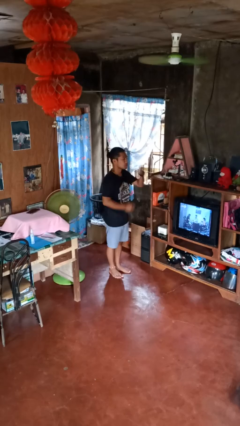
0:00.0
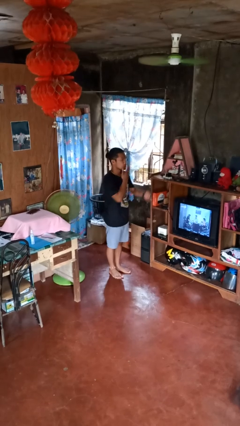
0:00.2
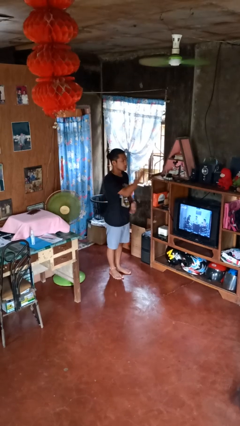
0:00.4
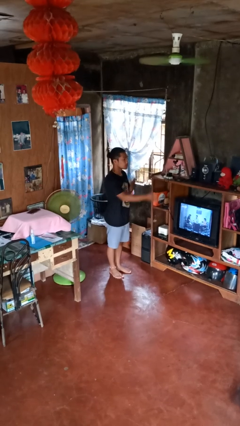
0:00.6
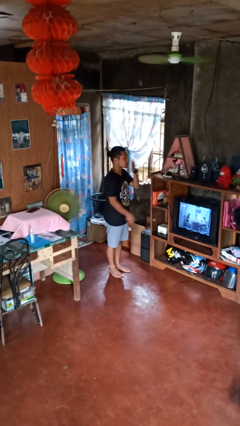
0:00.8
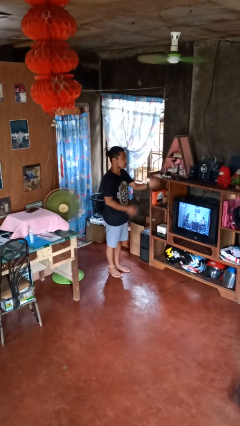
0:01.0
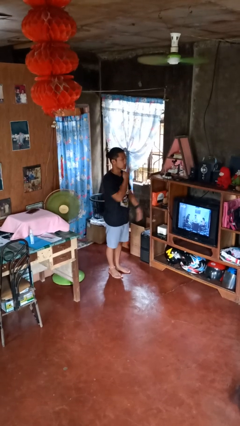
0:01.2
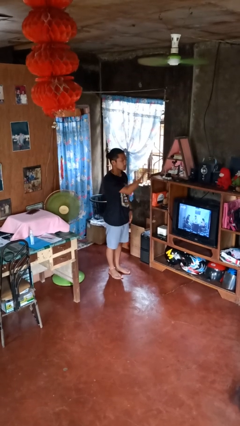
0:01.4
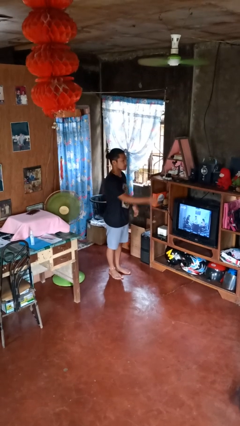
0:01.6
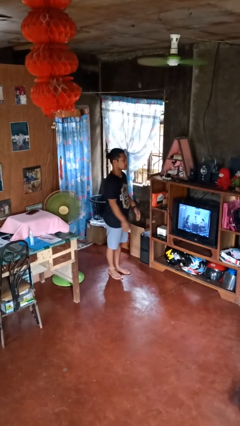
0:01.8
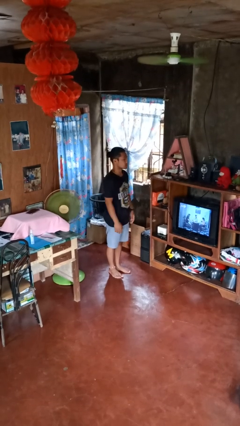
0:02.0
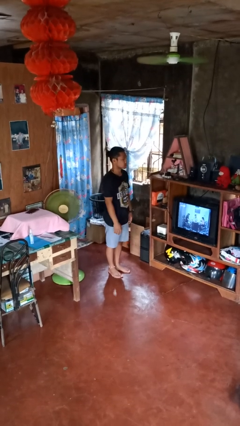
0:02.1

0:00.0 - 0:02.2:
person gestures blow kiss

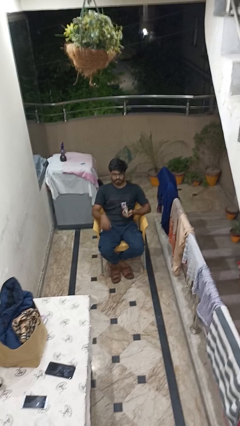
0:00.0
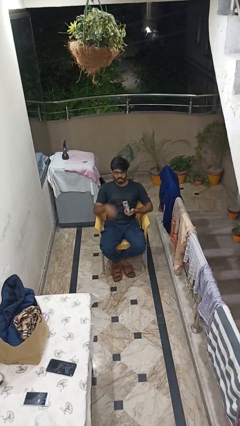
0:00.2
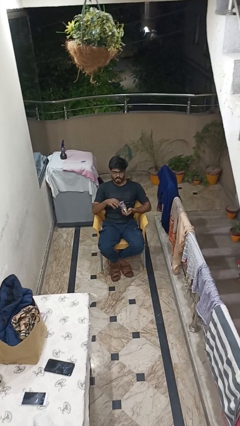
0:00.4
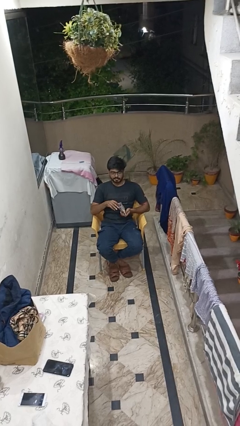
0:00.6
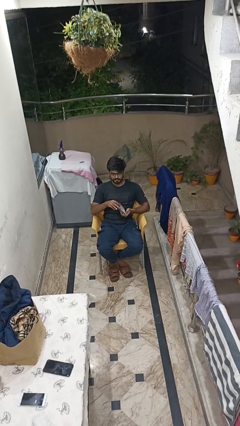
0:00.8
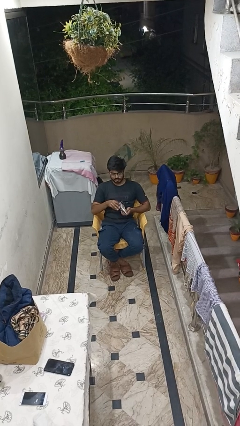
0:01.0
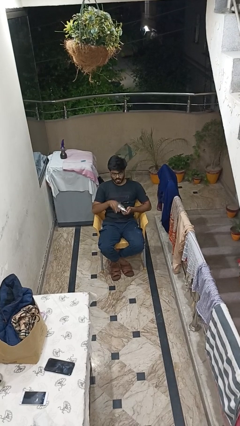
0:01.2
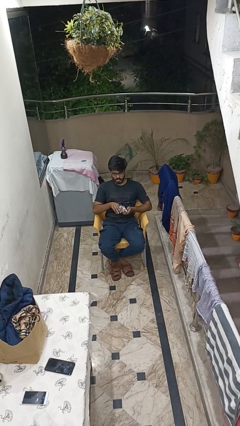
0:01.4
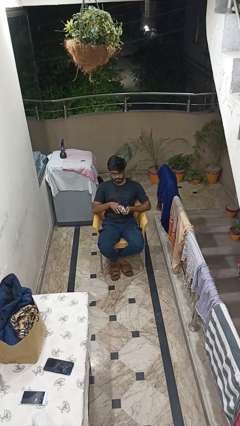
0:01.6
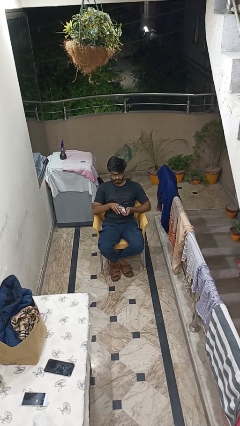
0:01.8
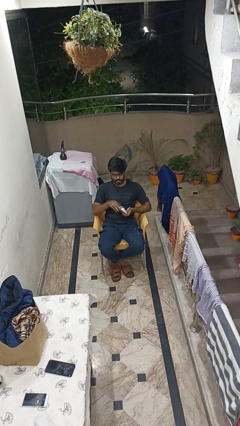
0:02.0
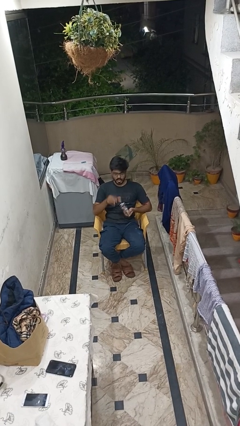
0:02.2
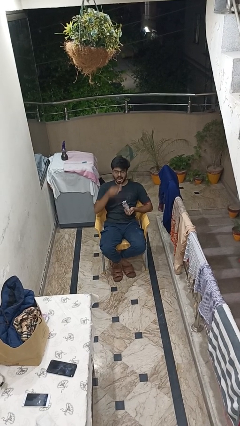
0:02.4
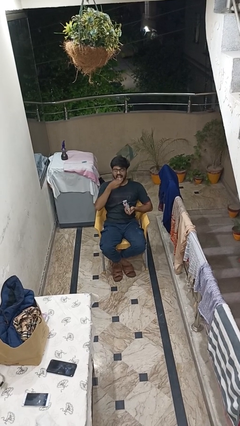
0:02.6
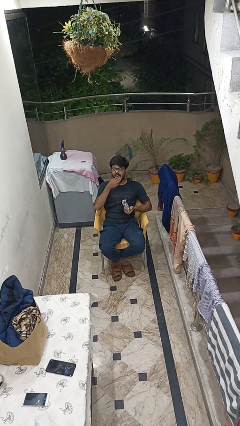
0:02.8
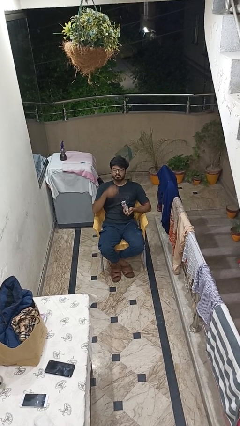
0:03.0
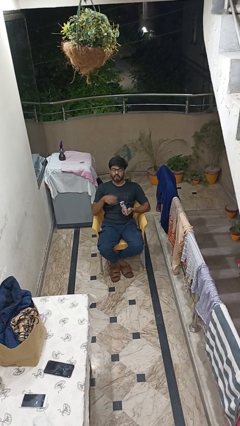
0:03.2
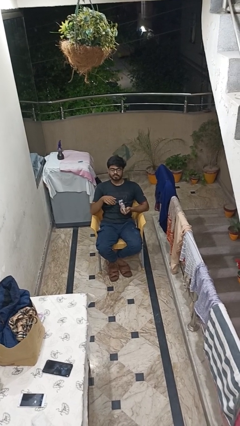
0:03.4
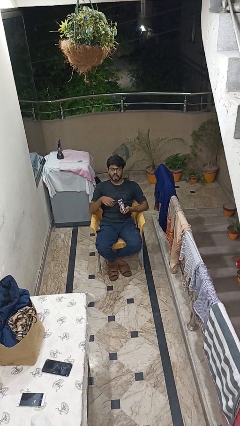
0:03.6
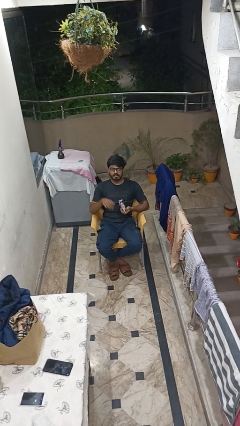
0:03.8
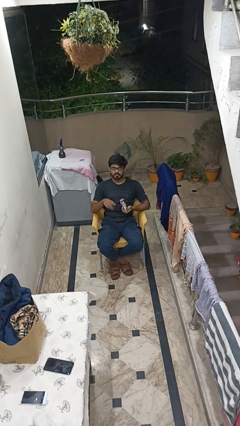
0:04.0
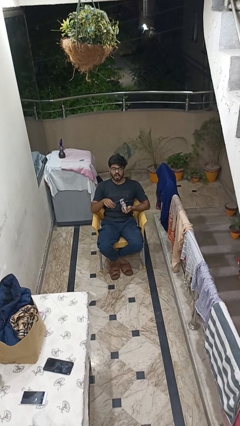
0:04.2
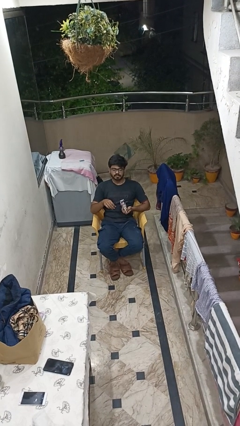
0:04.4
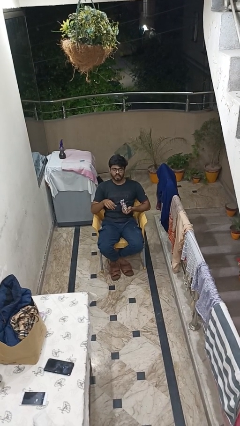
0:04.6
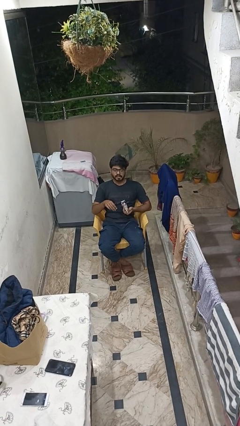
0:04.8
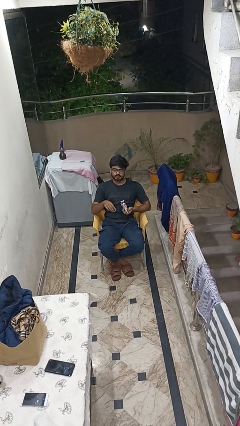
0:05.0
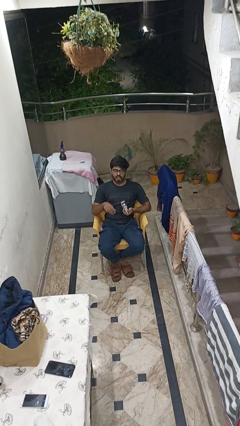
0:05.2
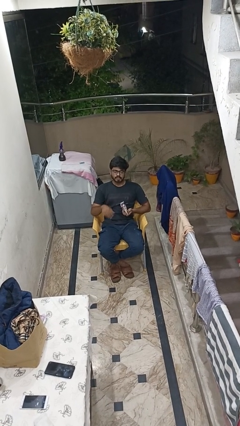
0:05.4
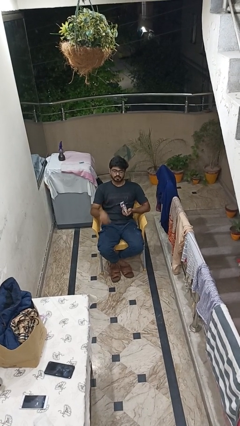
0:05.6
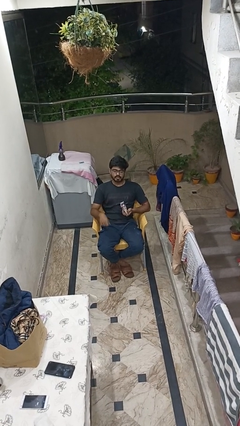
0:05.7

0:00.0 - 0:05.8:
person eats snack from bag

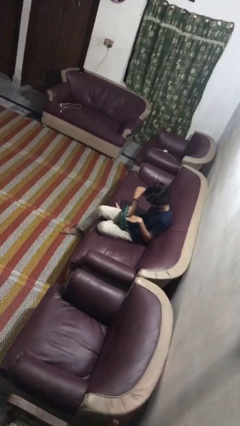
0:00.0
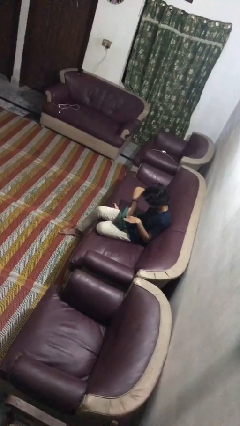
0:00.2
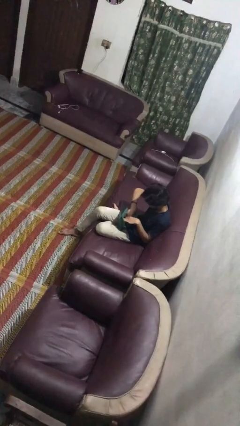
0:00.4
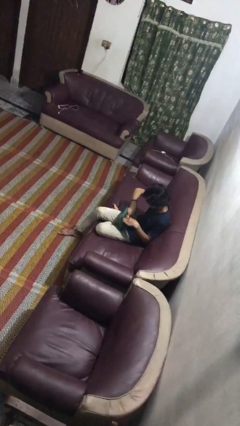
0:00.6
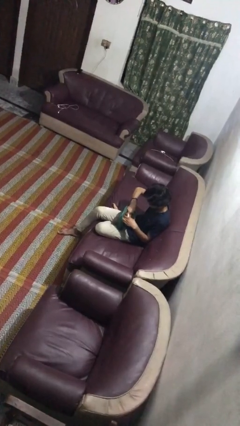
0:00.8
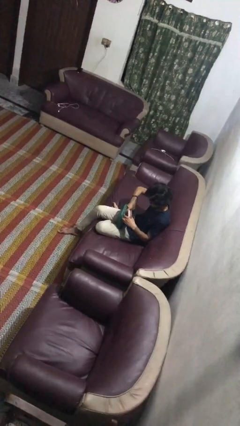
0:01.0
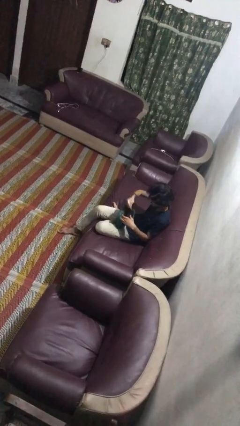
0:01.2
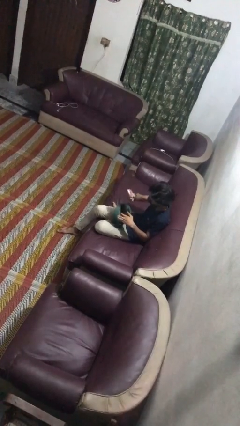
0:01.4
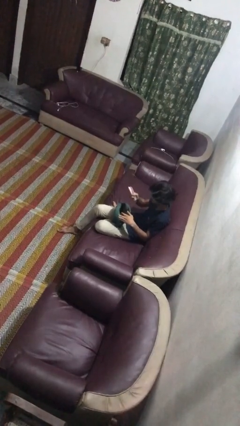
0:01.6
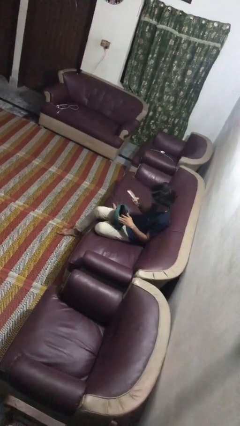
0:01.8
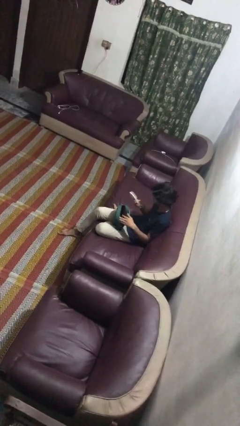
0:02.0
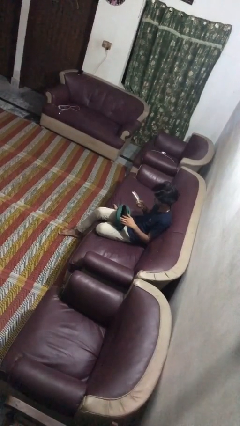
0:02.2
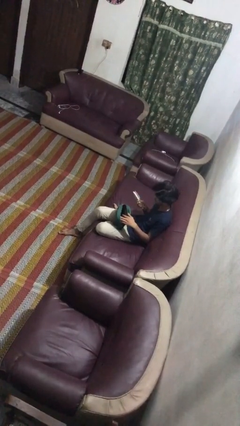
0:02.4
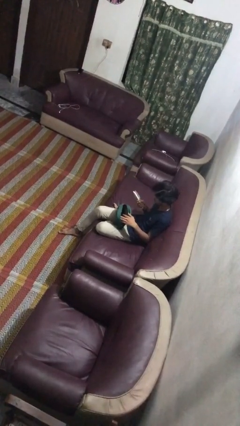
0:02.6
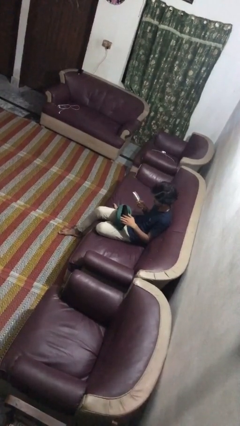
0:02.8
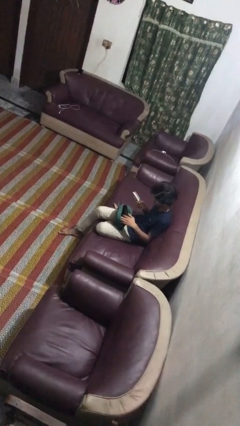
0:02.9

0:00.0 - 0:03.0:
person takes object from purse

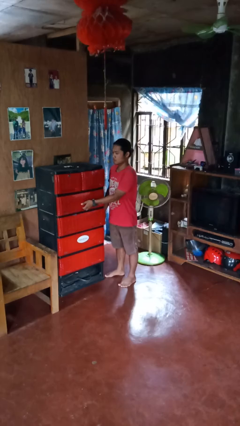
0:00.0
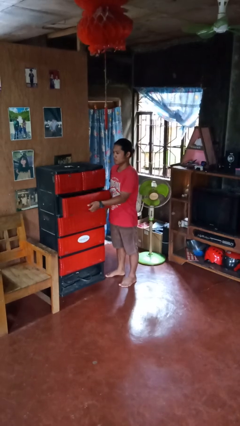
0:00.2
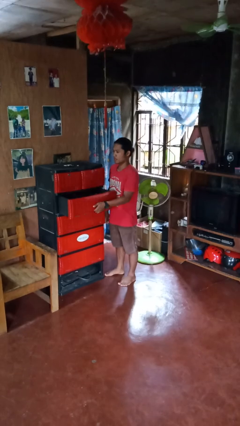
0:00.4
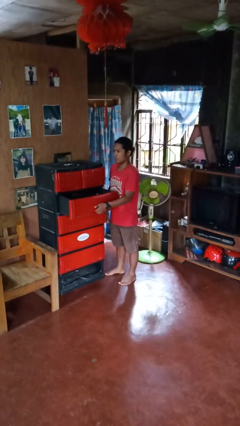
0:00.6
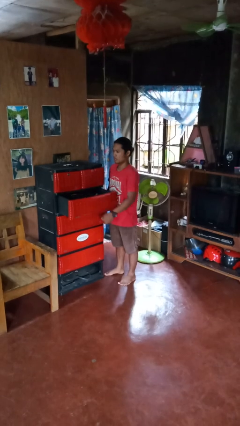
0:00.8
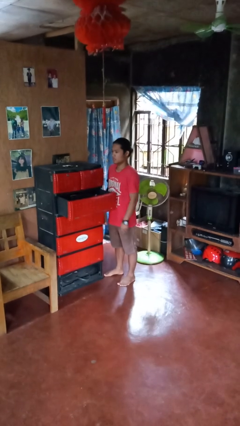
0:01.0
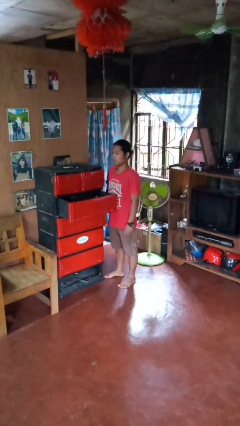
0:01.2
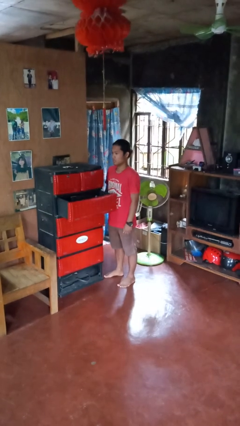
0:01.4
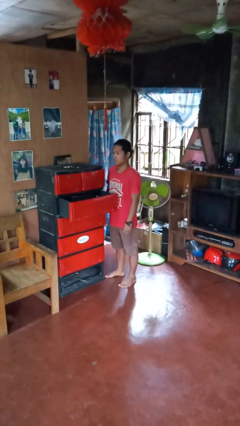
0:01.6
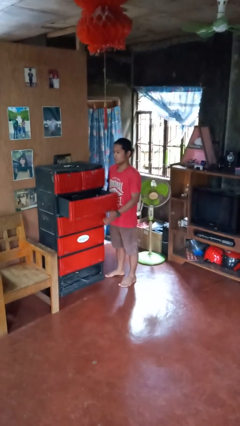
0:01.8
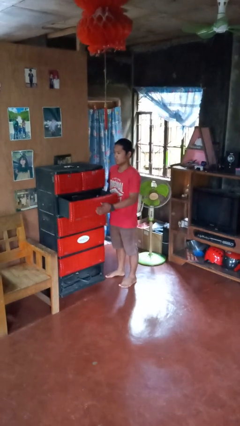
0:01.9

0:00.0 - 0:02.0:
person opens dresser drawer

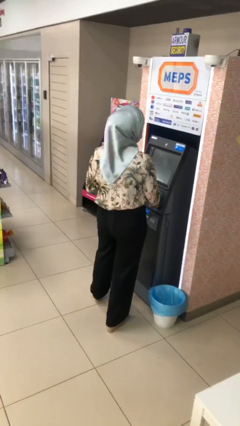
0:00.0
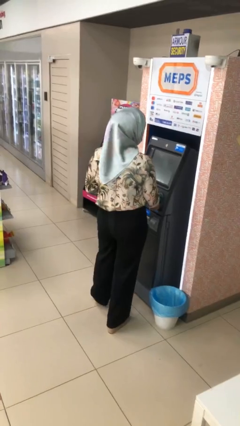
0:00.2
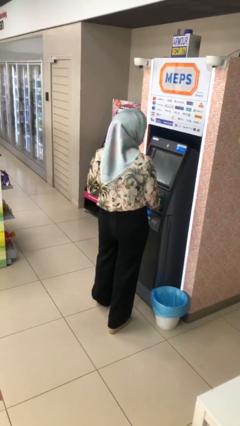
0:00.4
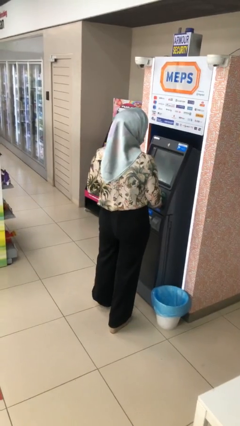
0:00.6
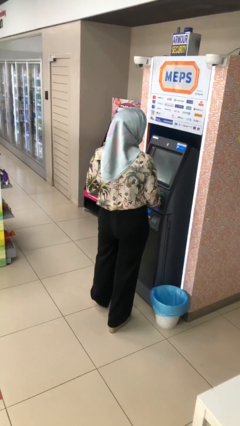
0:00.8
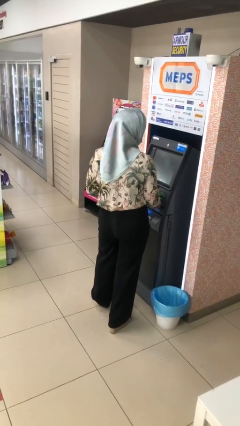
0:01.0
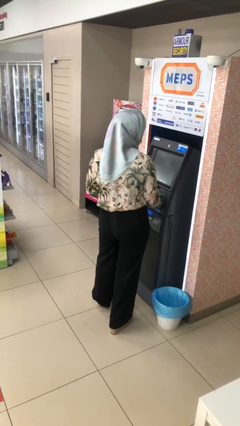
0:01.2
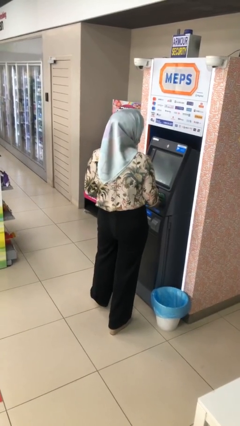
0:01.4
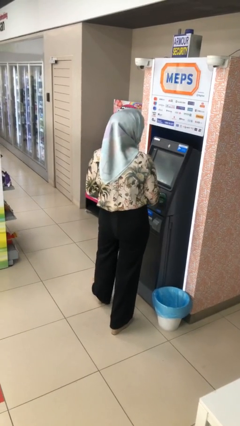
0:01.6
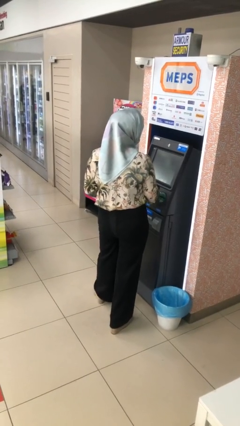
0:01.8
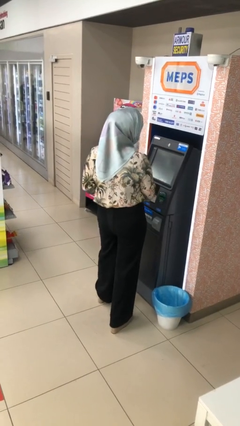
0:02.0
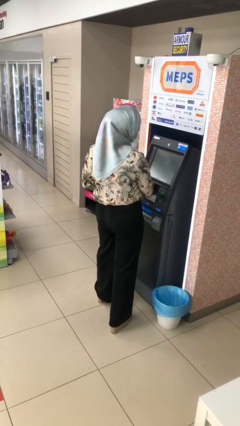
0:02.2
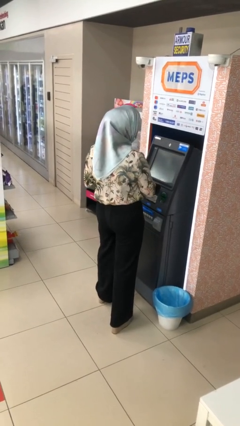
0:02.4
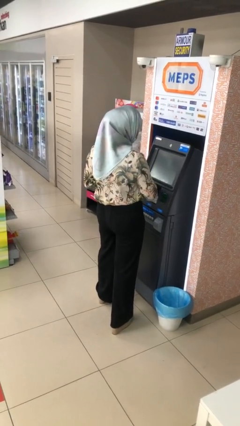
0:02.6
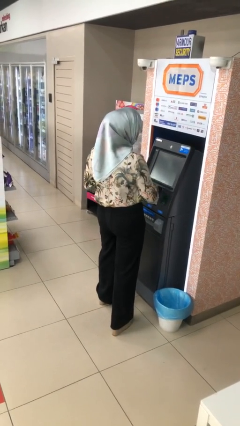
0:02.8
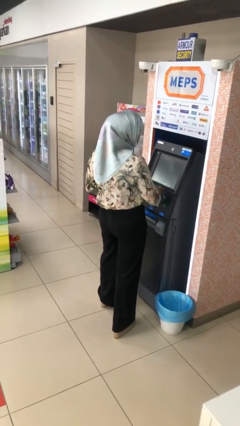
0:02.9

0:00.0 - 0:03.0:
person purchases from machine

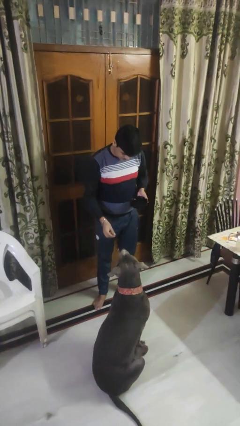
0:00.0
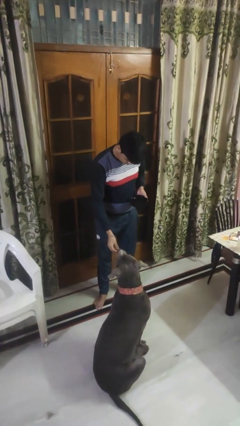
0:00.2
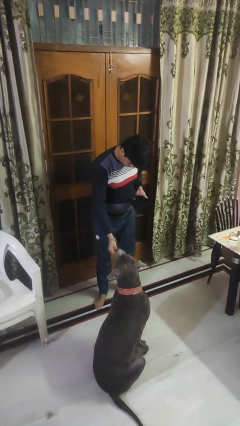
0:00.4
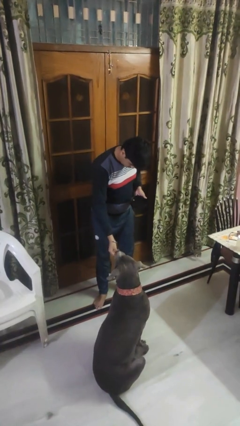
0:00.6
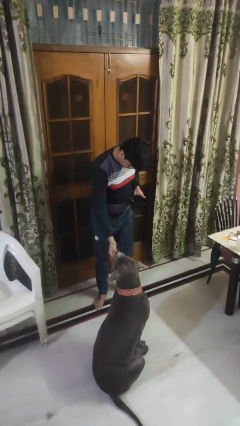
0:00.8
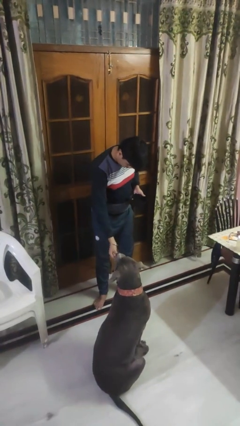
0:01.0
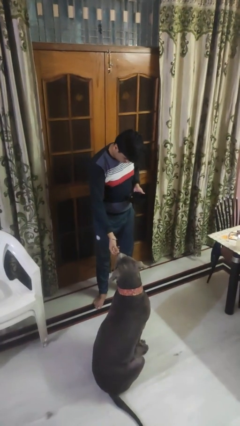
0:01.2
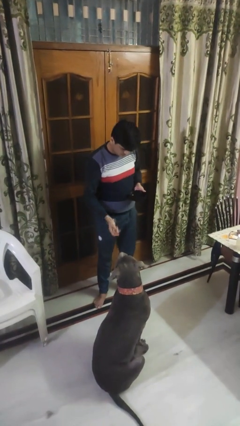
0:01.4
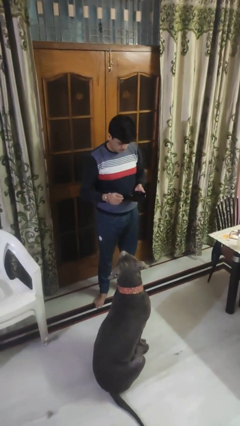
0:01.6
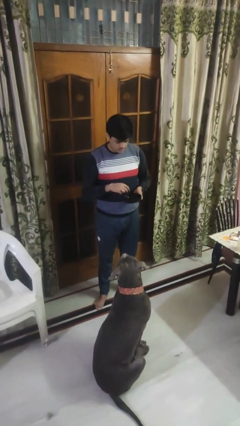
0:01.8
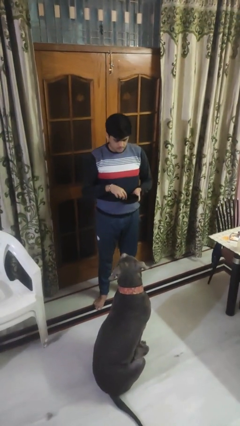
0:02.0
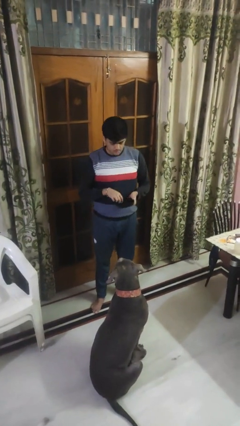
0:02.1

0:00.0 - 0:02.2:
person feeds dog
